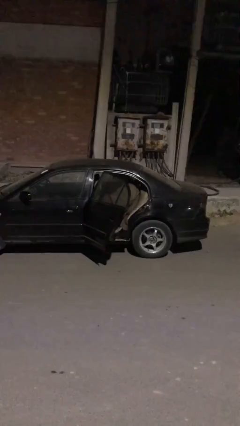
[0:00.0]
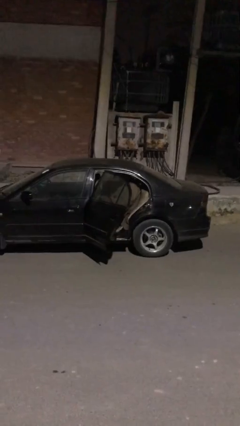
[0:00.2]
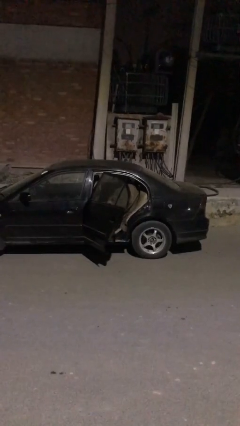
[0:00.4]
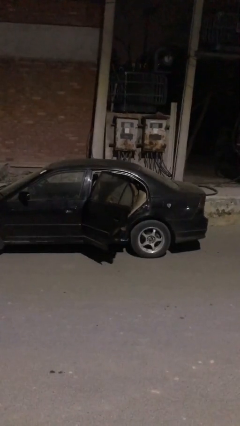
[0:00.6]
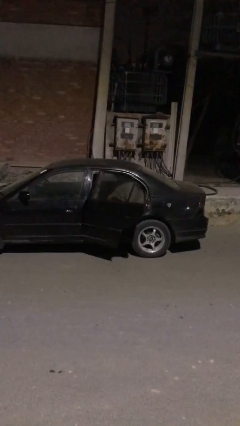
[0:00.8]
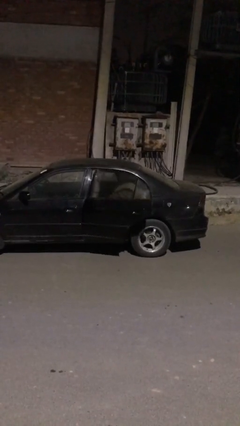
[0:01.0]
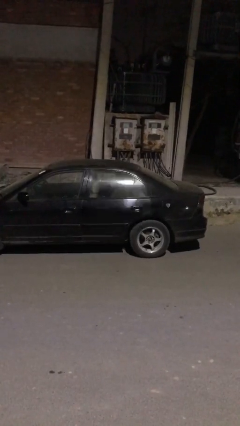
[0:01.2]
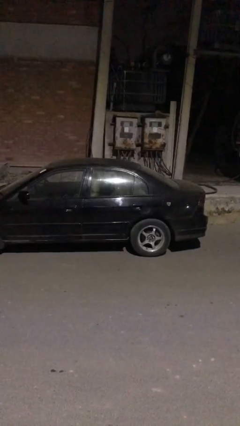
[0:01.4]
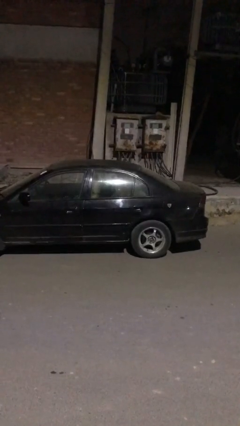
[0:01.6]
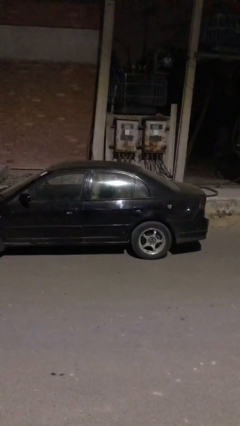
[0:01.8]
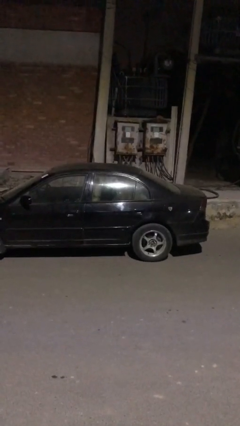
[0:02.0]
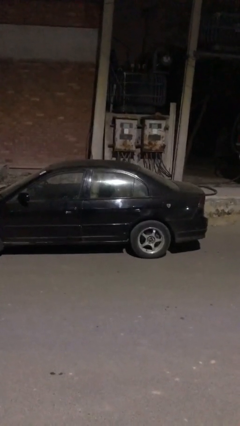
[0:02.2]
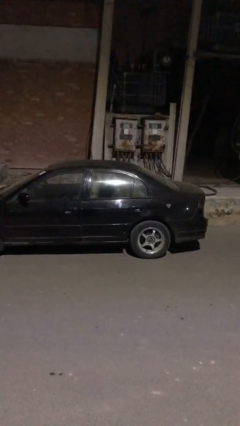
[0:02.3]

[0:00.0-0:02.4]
person closes car door

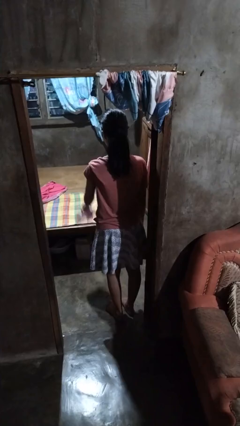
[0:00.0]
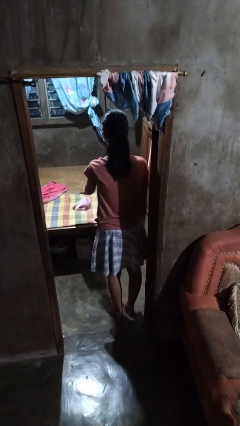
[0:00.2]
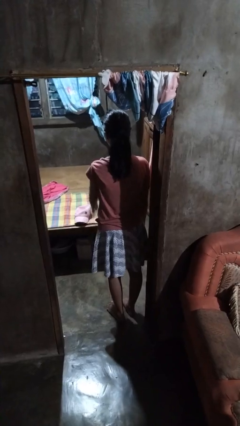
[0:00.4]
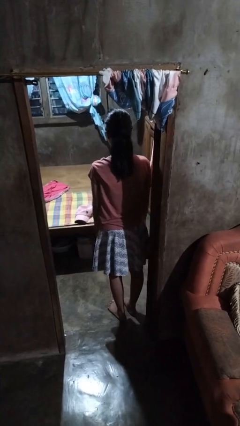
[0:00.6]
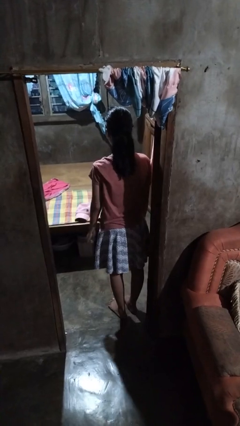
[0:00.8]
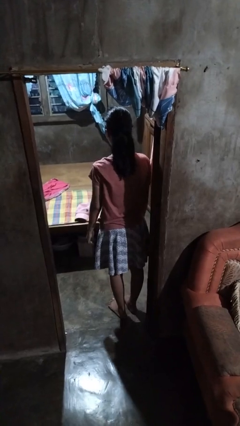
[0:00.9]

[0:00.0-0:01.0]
person throws object on bed

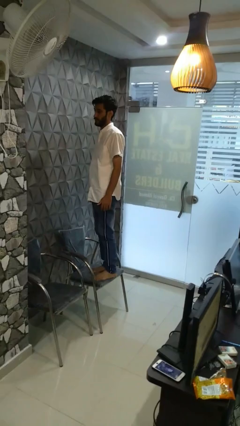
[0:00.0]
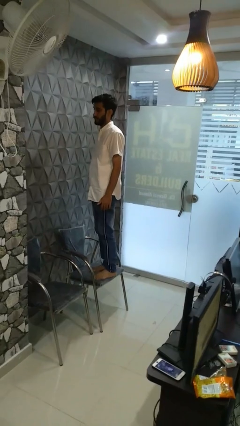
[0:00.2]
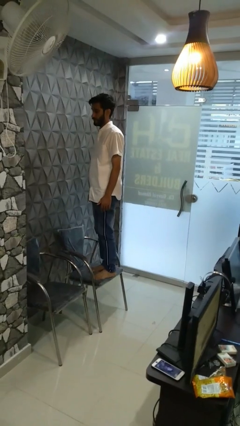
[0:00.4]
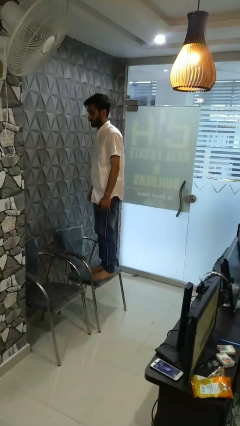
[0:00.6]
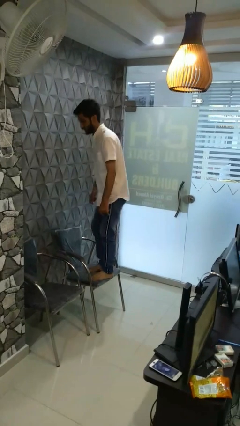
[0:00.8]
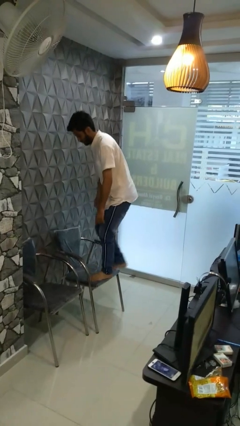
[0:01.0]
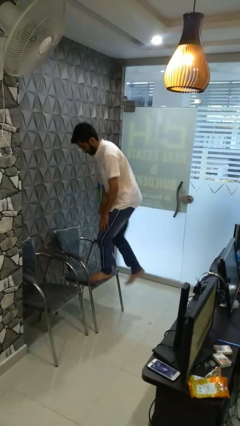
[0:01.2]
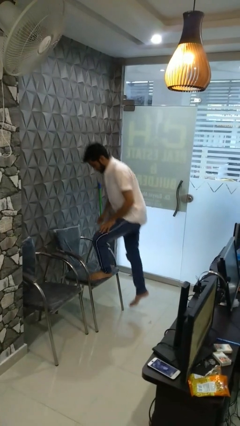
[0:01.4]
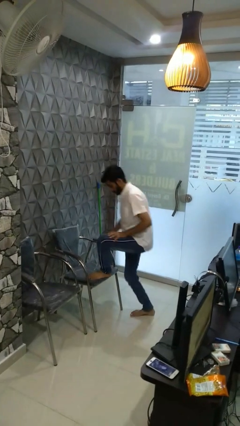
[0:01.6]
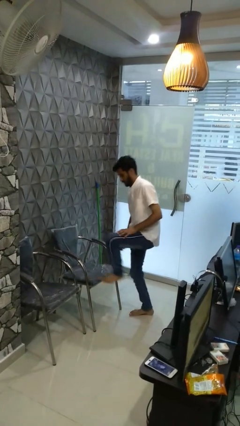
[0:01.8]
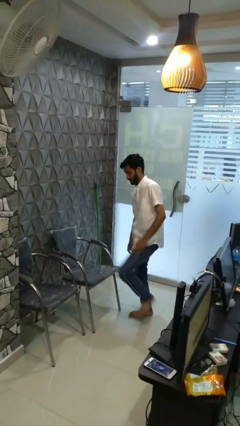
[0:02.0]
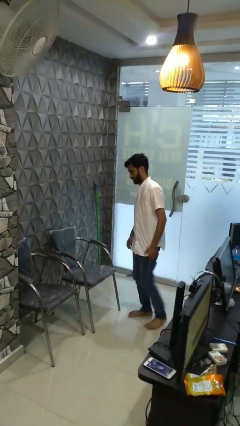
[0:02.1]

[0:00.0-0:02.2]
person climbs off chair

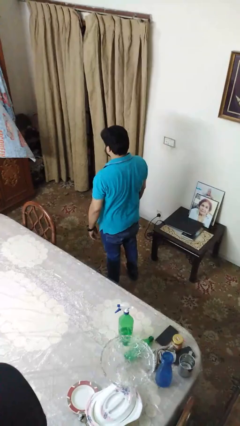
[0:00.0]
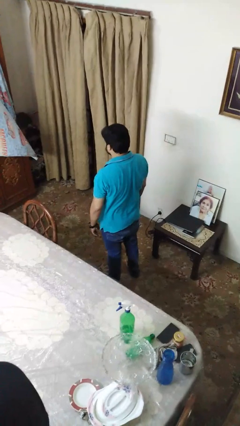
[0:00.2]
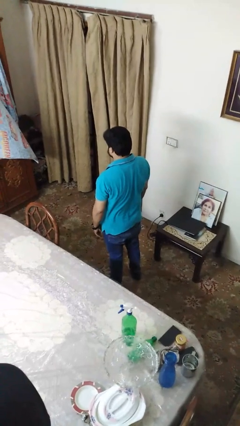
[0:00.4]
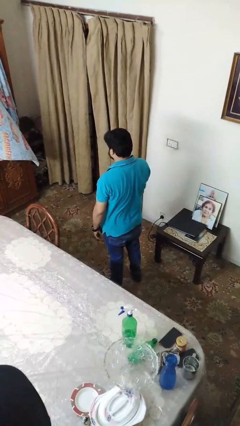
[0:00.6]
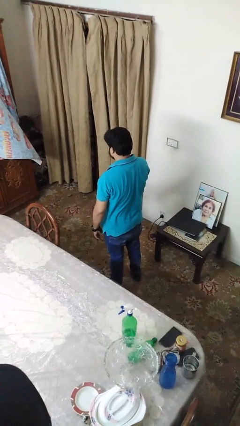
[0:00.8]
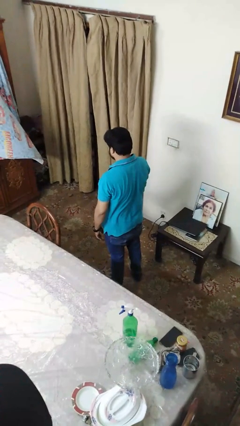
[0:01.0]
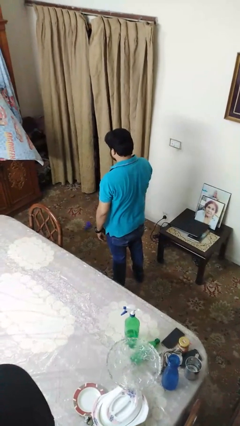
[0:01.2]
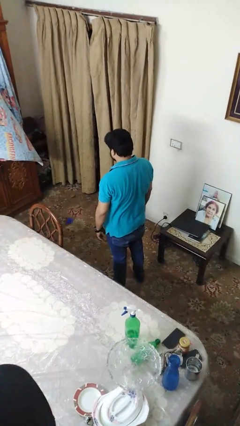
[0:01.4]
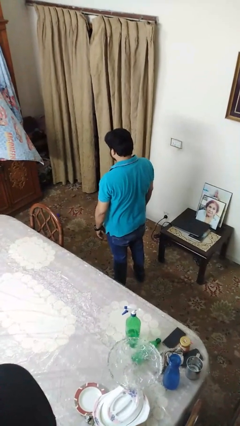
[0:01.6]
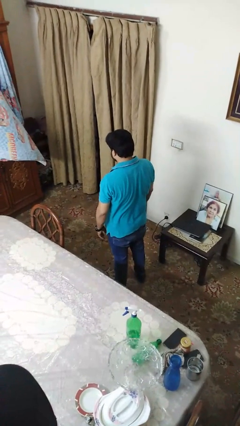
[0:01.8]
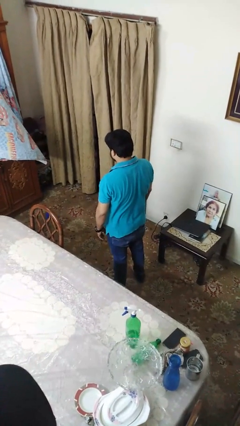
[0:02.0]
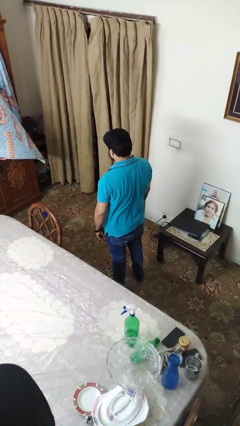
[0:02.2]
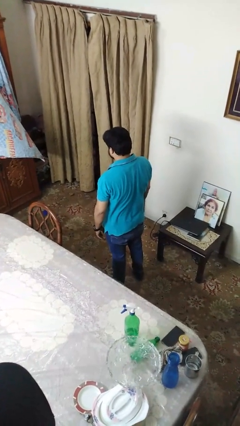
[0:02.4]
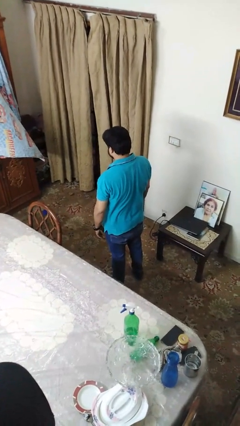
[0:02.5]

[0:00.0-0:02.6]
person throws object to ground

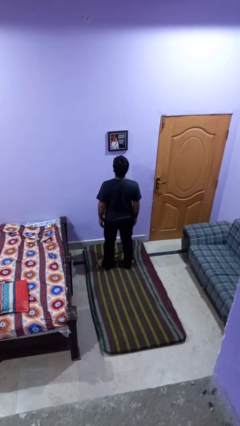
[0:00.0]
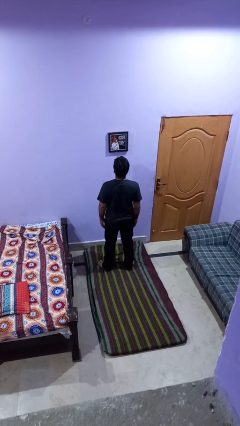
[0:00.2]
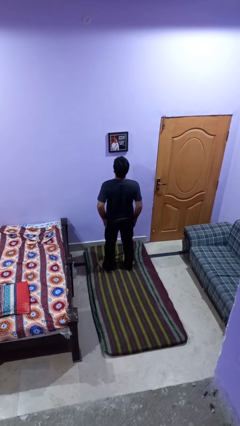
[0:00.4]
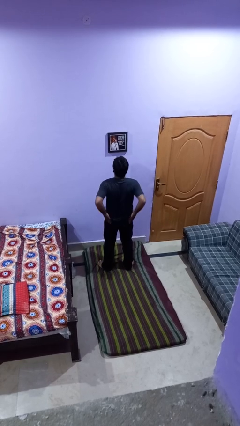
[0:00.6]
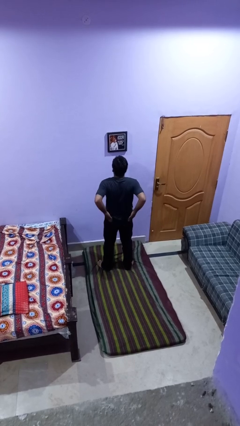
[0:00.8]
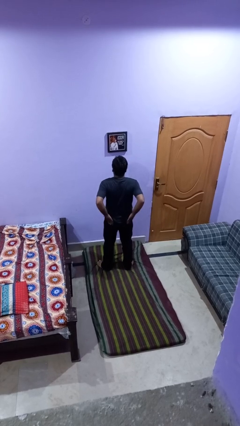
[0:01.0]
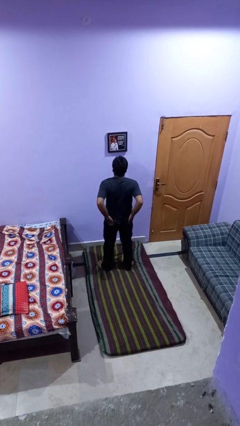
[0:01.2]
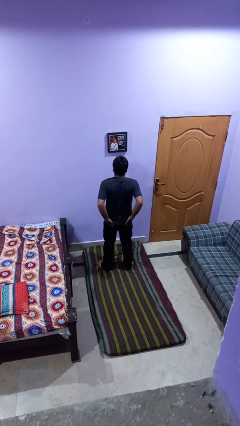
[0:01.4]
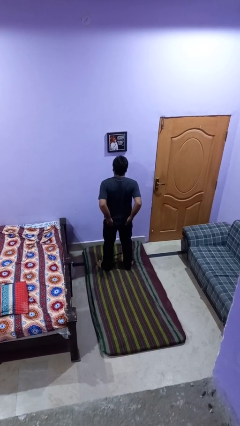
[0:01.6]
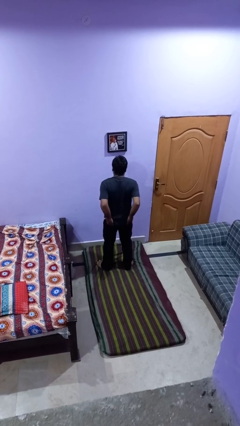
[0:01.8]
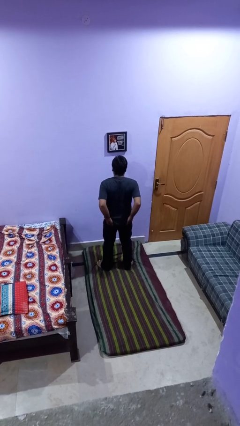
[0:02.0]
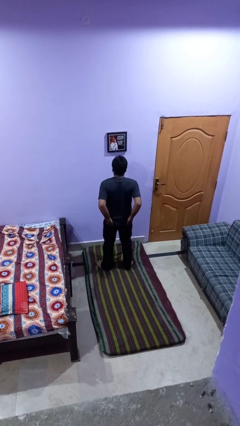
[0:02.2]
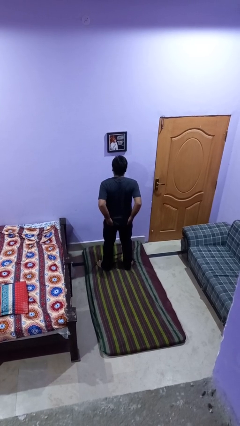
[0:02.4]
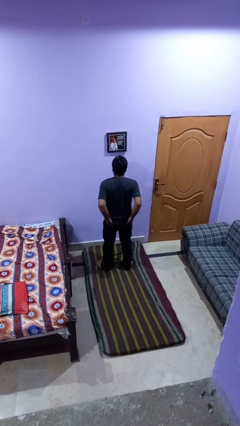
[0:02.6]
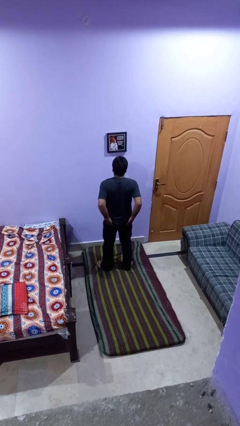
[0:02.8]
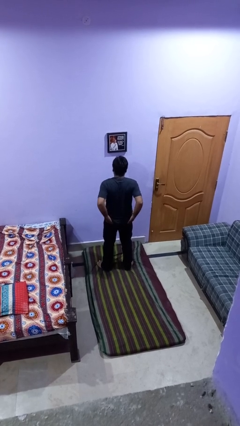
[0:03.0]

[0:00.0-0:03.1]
person puts hands in back pockets

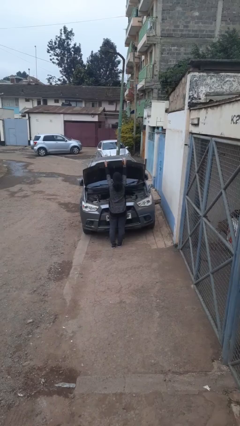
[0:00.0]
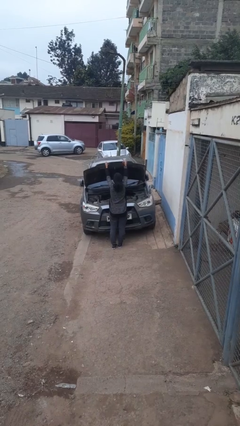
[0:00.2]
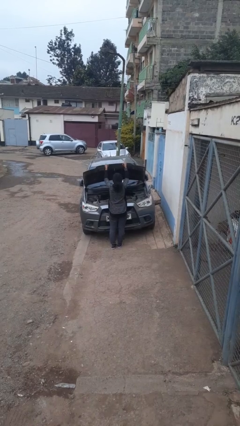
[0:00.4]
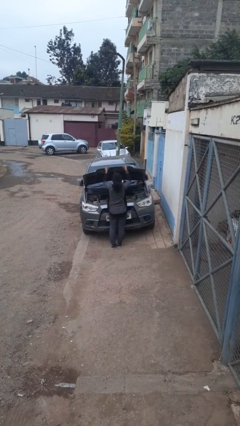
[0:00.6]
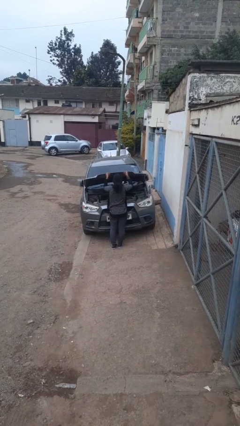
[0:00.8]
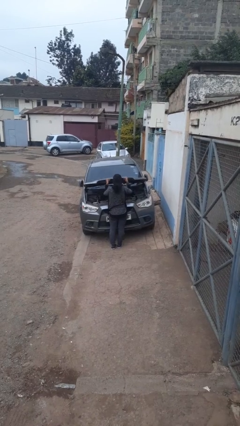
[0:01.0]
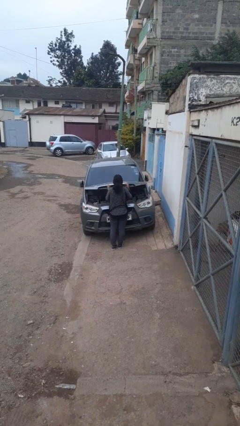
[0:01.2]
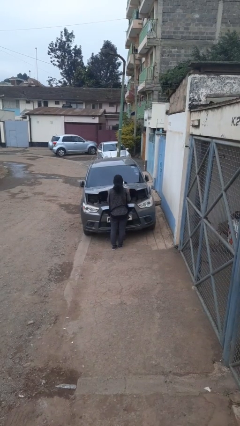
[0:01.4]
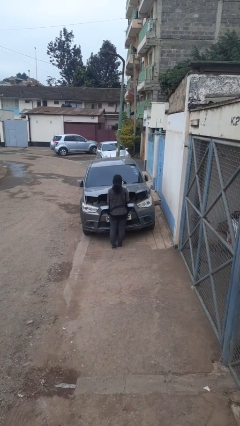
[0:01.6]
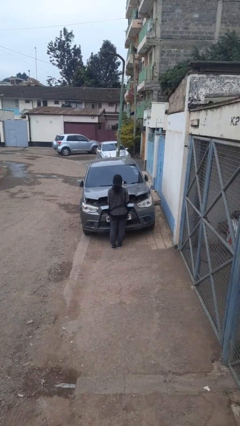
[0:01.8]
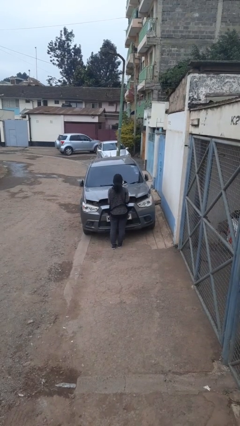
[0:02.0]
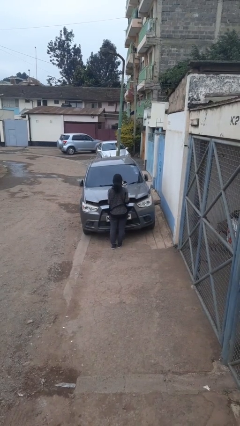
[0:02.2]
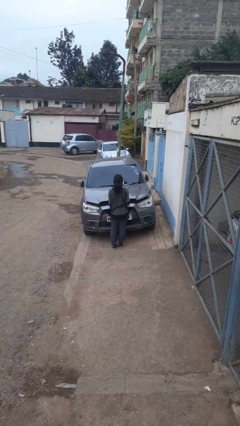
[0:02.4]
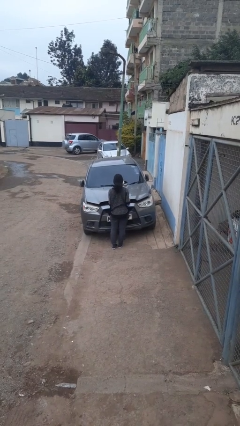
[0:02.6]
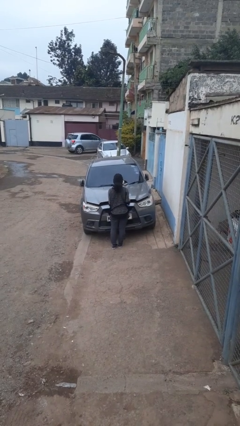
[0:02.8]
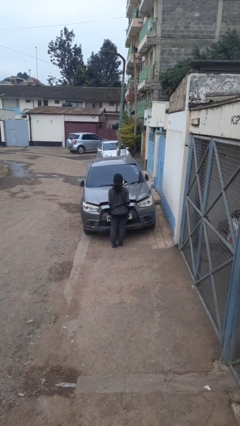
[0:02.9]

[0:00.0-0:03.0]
person closes car hood

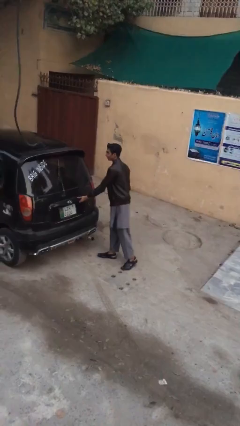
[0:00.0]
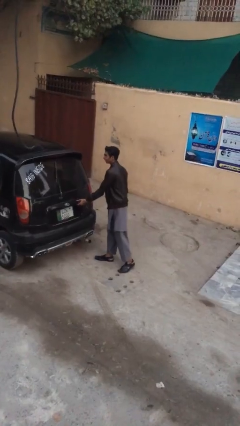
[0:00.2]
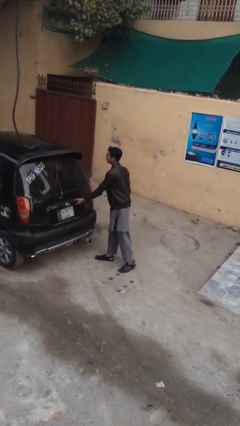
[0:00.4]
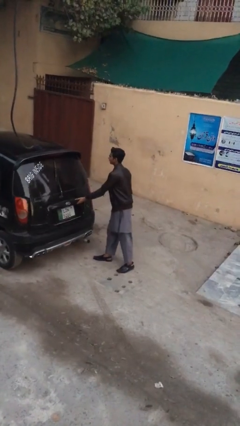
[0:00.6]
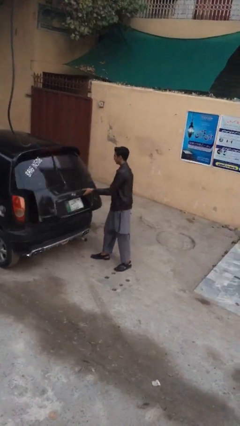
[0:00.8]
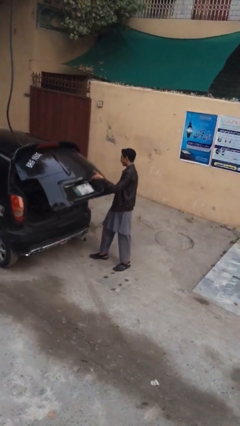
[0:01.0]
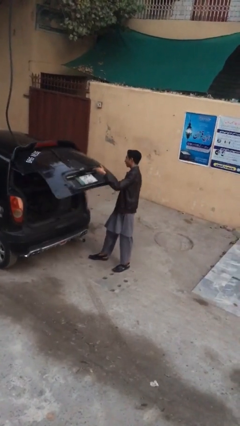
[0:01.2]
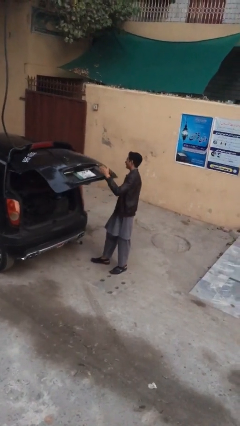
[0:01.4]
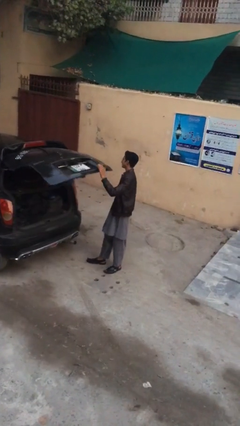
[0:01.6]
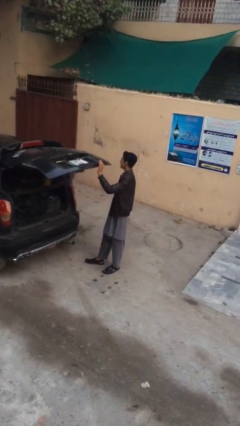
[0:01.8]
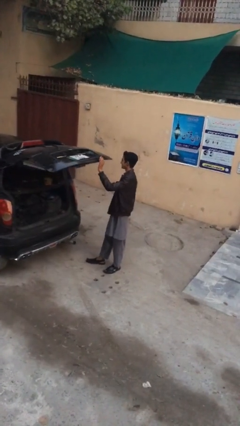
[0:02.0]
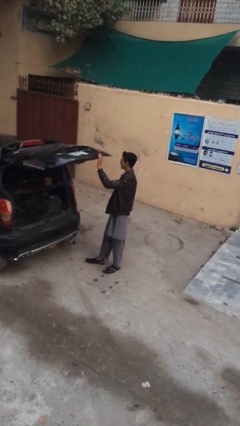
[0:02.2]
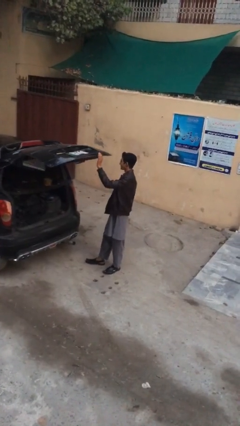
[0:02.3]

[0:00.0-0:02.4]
person opens car trunk

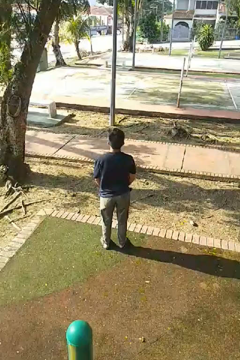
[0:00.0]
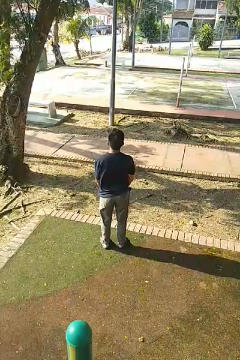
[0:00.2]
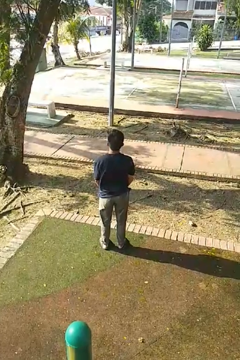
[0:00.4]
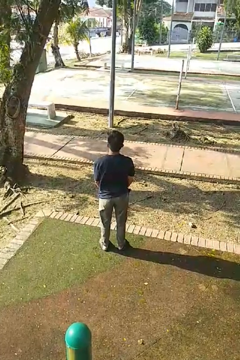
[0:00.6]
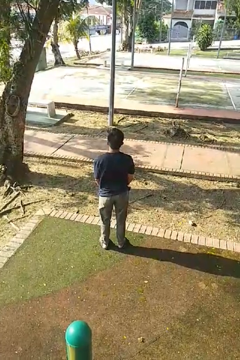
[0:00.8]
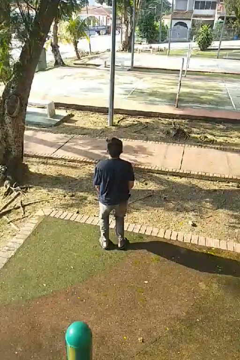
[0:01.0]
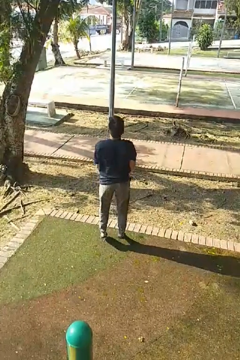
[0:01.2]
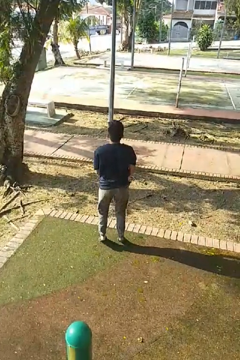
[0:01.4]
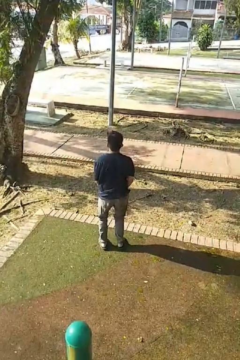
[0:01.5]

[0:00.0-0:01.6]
person jumps
